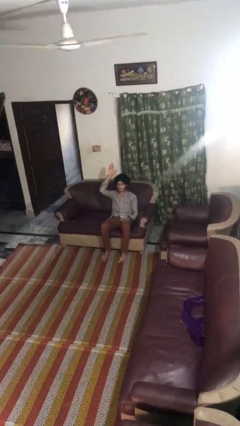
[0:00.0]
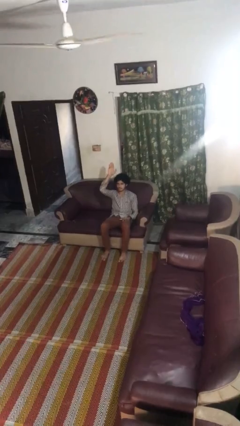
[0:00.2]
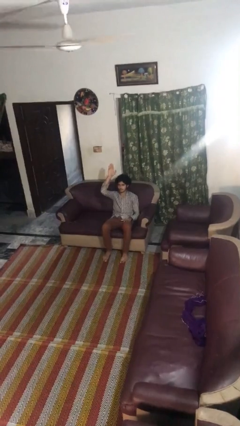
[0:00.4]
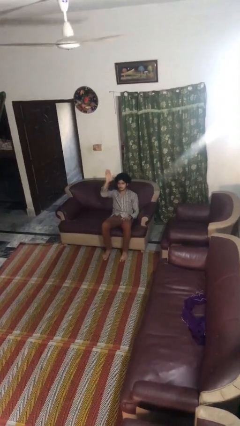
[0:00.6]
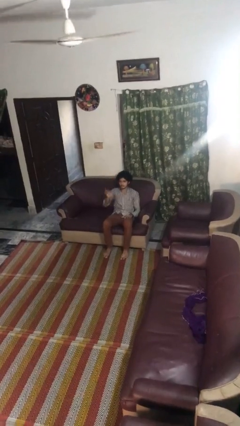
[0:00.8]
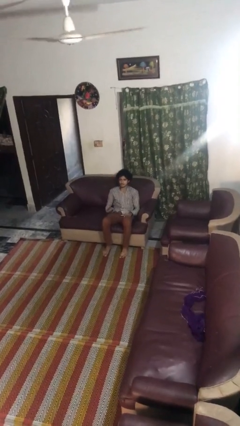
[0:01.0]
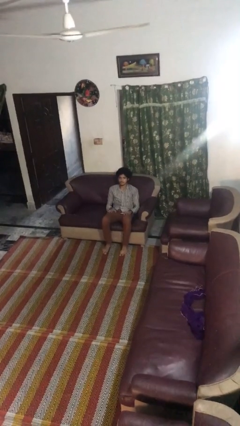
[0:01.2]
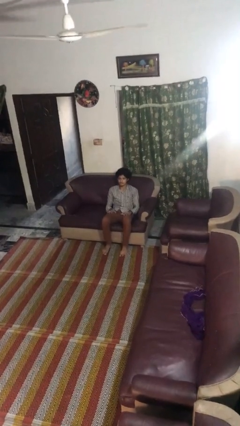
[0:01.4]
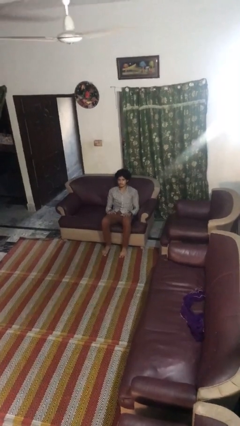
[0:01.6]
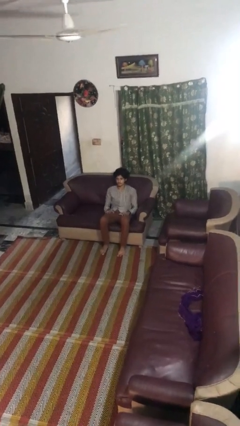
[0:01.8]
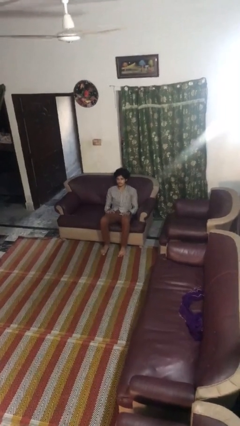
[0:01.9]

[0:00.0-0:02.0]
person gestures lower hand

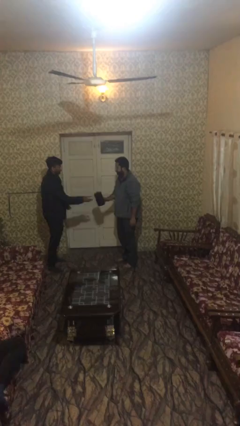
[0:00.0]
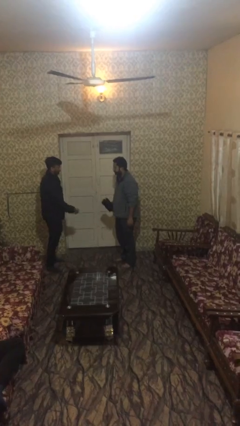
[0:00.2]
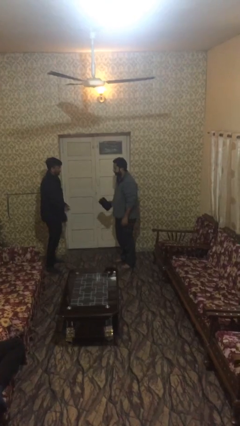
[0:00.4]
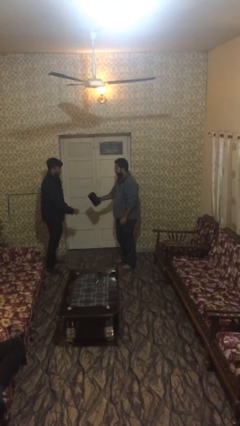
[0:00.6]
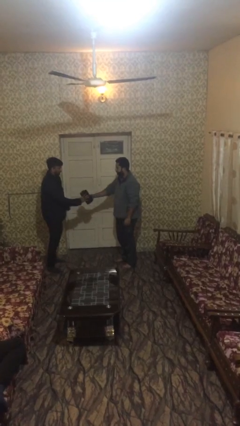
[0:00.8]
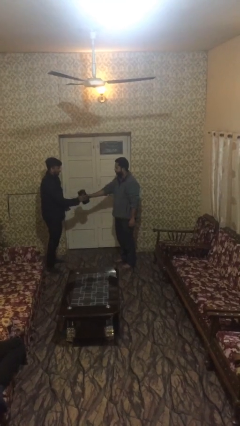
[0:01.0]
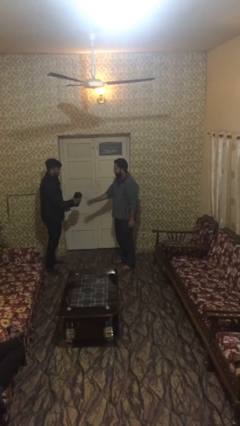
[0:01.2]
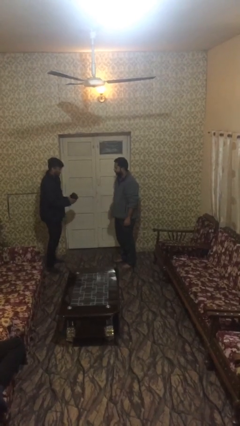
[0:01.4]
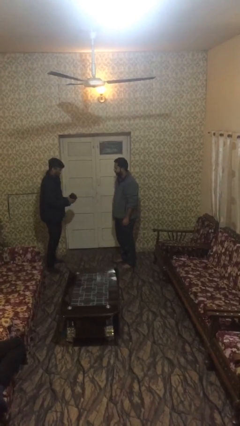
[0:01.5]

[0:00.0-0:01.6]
person transfers object to person

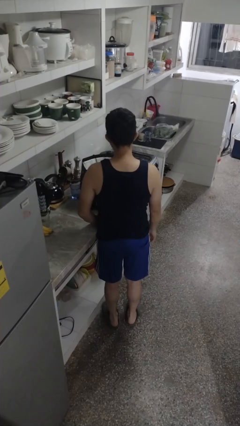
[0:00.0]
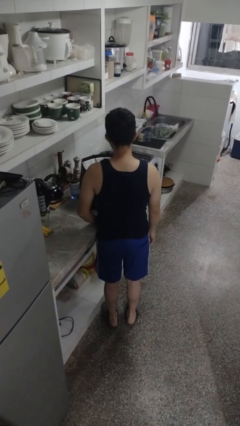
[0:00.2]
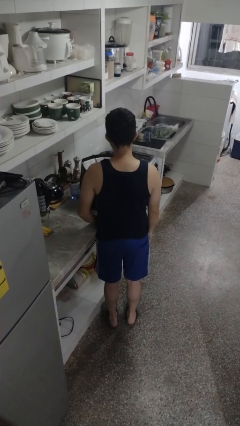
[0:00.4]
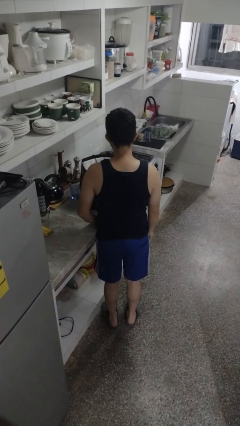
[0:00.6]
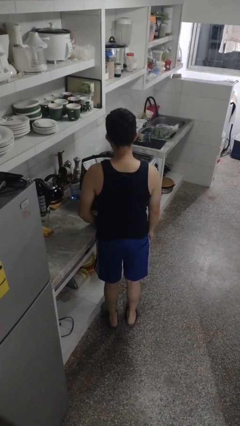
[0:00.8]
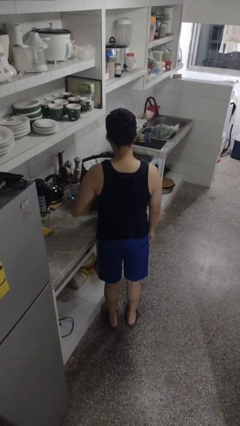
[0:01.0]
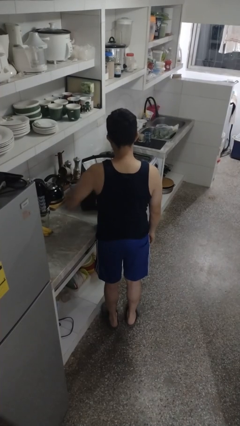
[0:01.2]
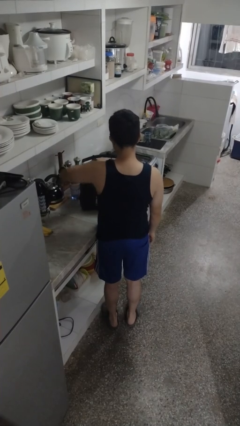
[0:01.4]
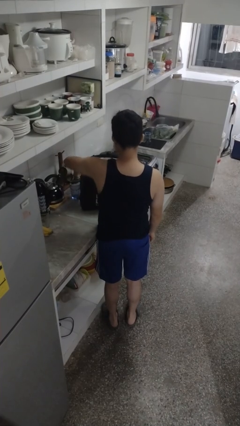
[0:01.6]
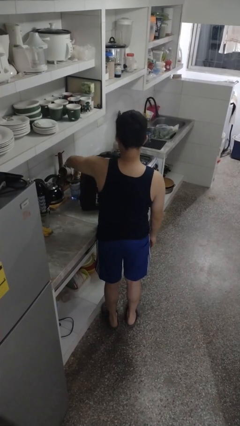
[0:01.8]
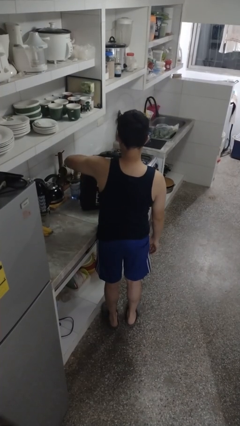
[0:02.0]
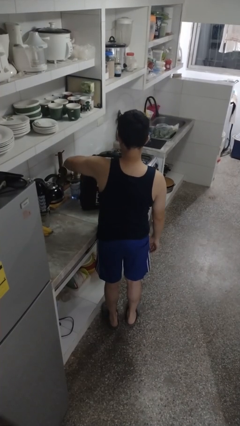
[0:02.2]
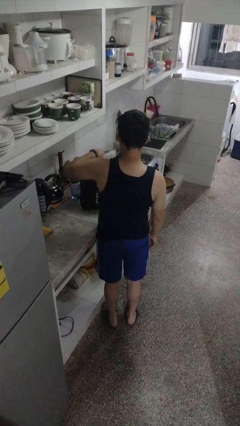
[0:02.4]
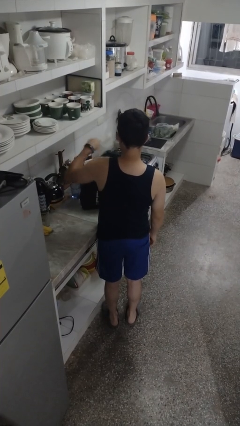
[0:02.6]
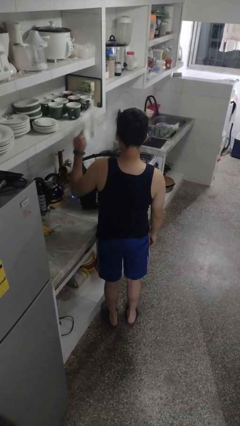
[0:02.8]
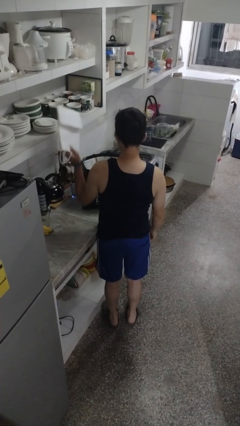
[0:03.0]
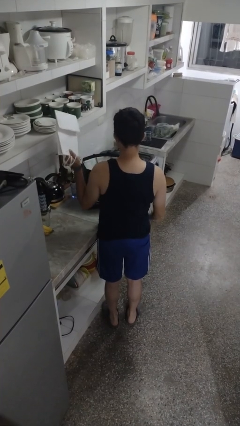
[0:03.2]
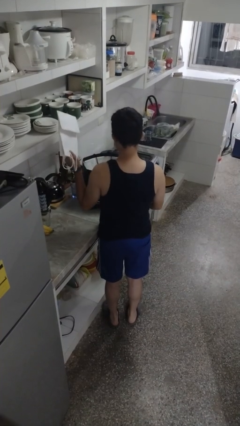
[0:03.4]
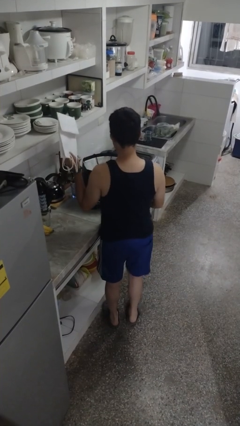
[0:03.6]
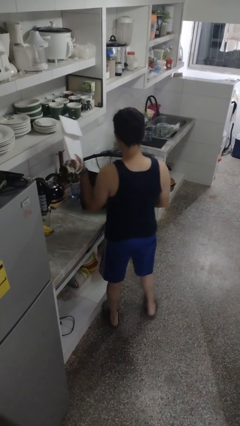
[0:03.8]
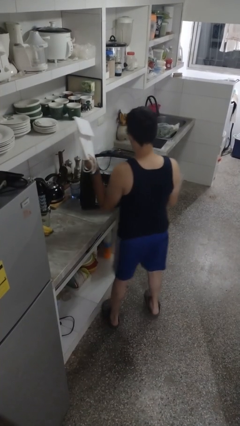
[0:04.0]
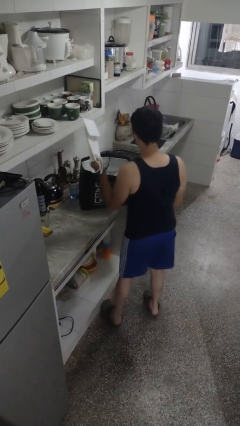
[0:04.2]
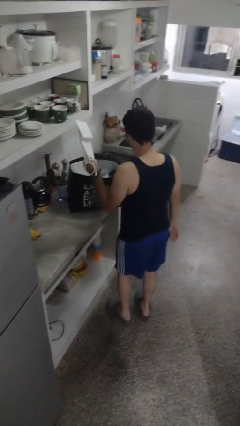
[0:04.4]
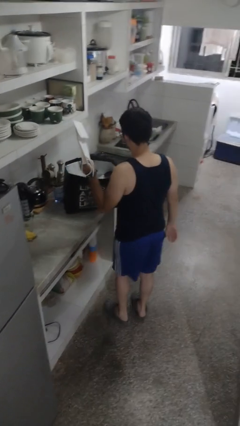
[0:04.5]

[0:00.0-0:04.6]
person takes object from bag

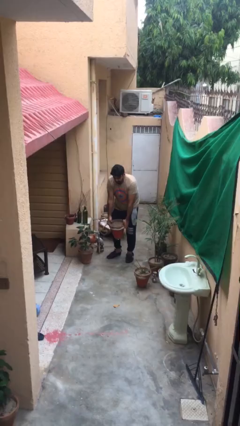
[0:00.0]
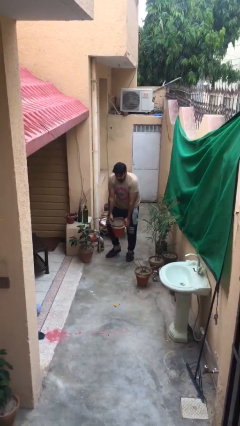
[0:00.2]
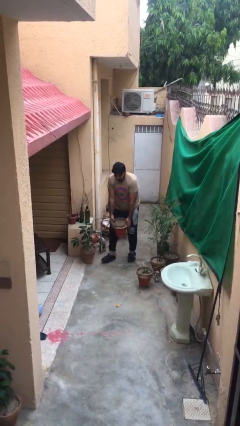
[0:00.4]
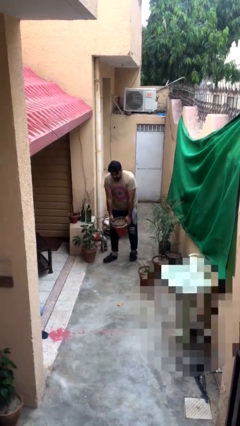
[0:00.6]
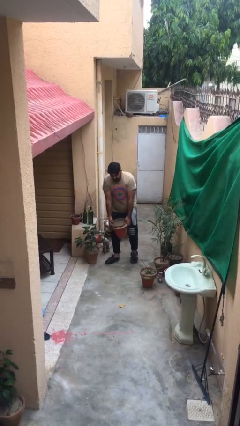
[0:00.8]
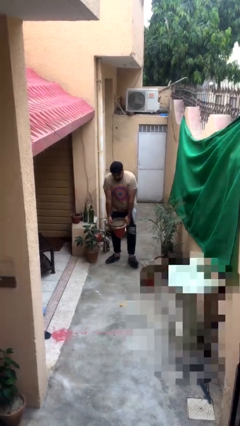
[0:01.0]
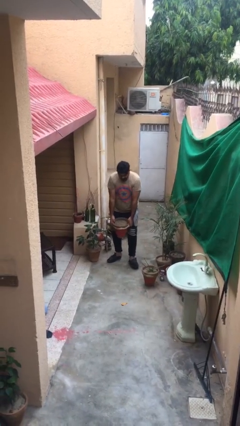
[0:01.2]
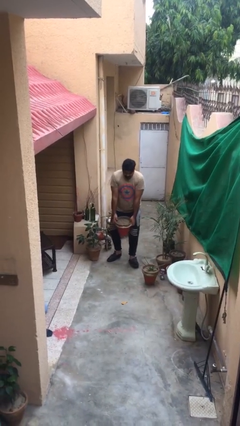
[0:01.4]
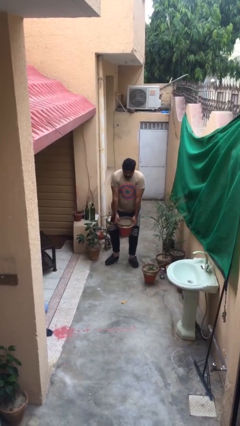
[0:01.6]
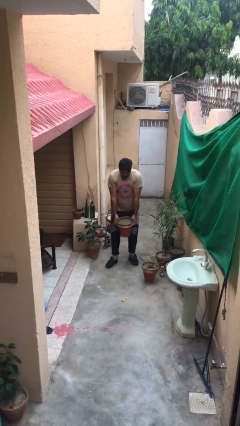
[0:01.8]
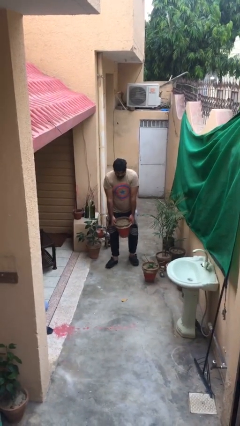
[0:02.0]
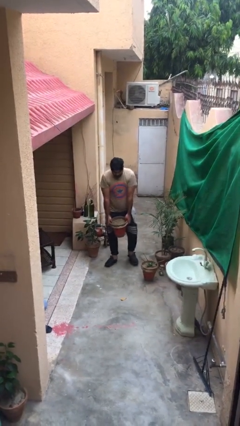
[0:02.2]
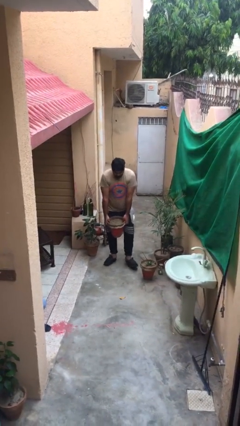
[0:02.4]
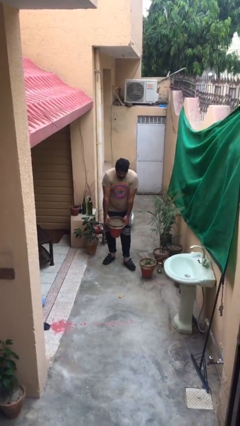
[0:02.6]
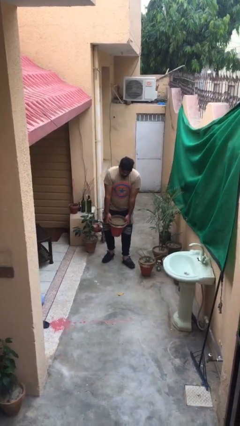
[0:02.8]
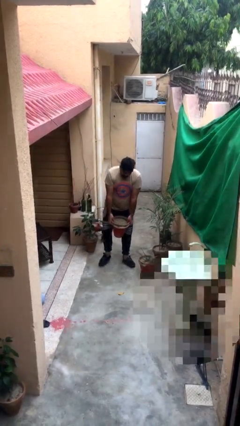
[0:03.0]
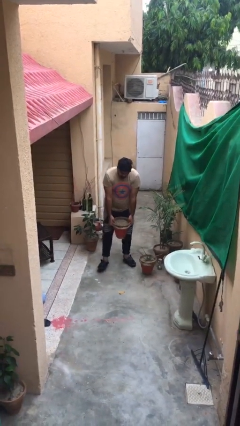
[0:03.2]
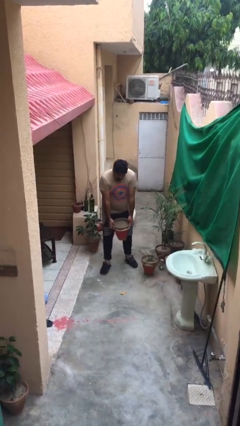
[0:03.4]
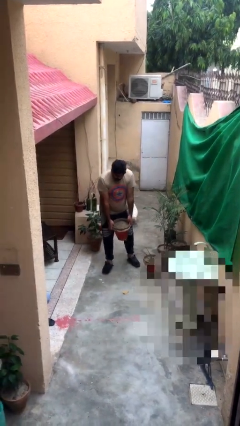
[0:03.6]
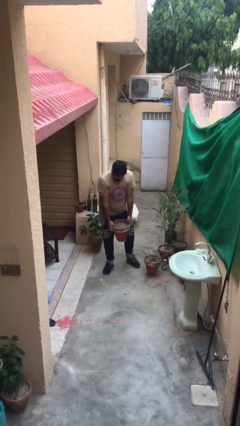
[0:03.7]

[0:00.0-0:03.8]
person carries heavy object

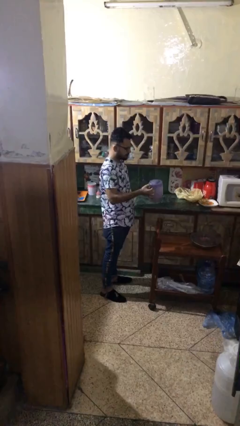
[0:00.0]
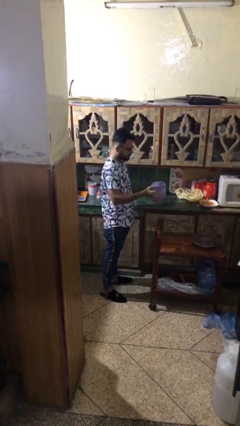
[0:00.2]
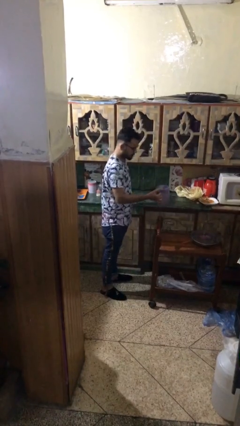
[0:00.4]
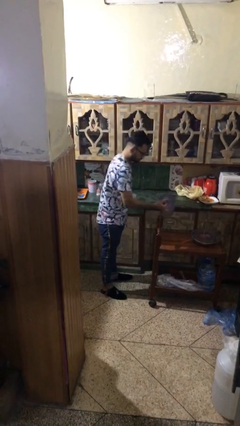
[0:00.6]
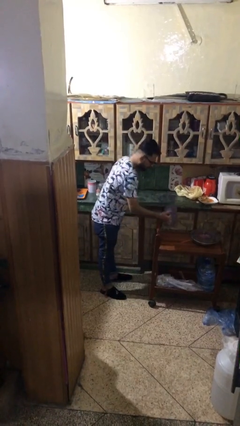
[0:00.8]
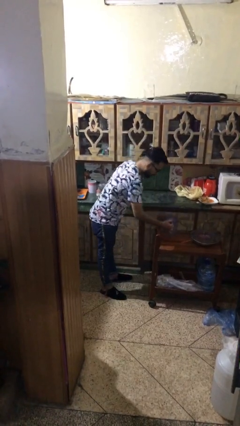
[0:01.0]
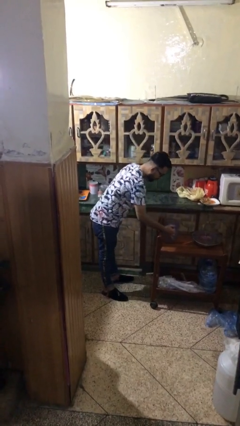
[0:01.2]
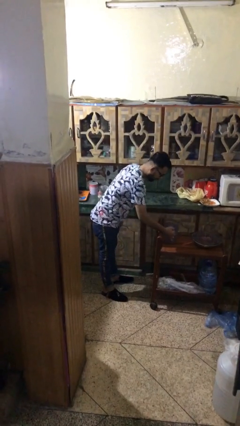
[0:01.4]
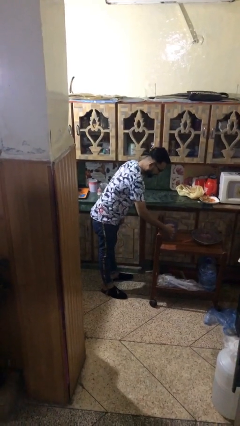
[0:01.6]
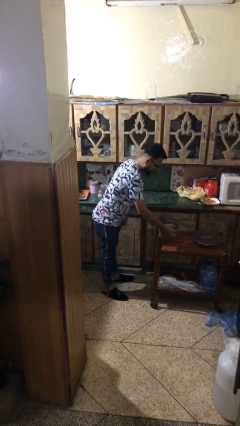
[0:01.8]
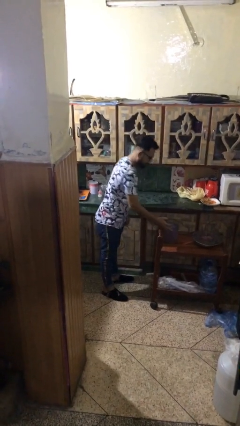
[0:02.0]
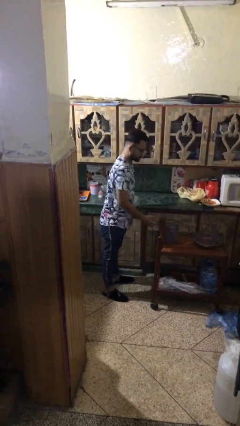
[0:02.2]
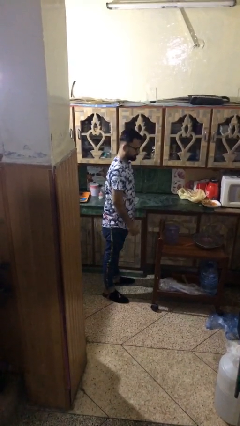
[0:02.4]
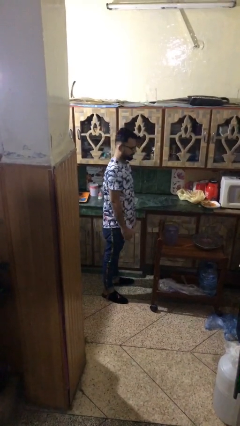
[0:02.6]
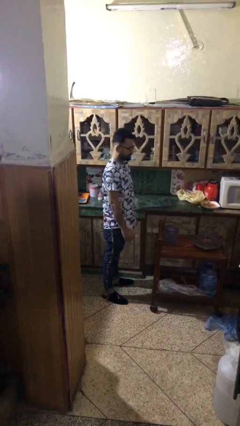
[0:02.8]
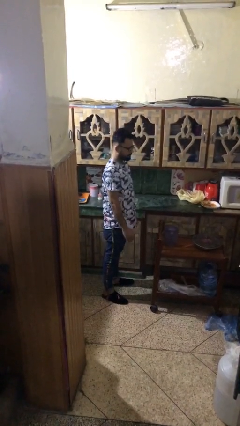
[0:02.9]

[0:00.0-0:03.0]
person puts down object on table

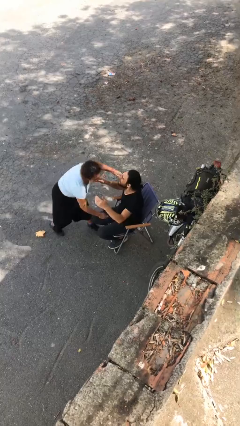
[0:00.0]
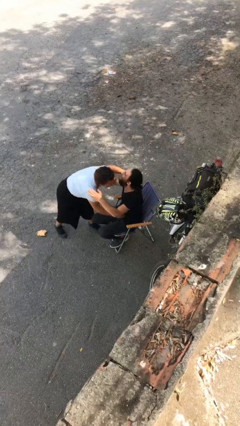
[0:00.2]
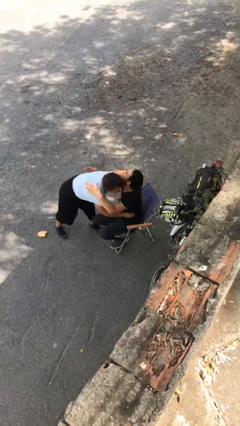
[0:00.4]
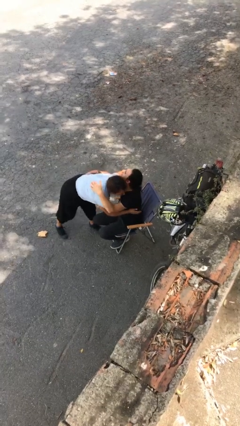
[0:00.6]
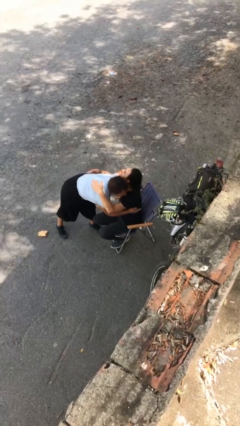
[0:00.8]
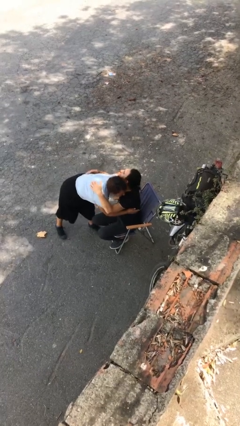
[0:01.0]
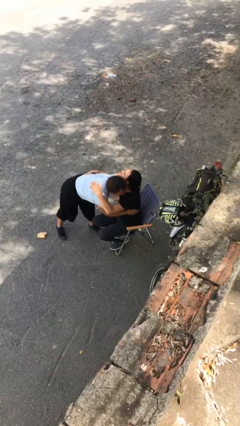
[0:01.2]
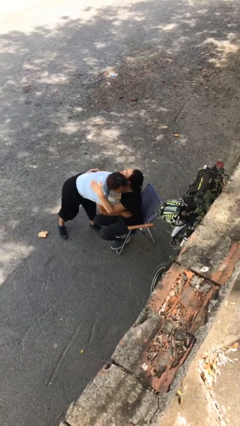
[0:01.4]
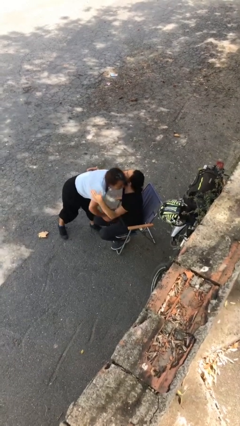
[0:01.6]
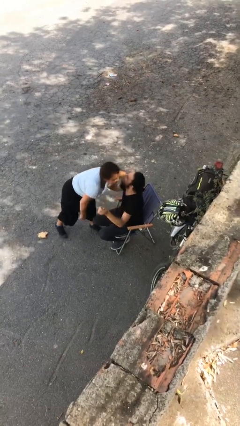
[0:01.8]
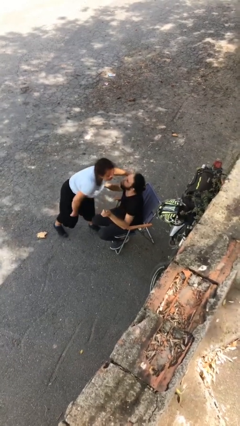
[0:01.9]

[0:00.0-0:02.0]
person embraces person

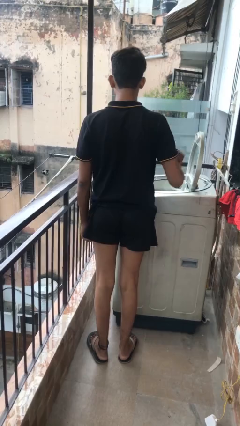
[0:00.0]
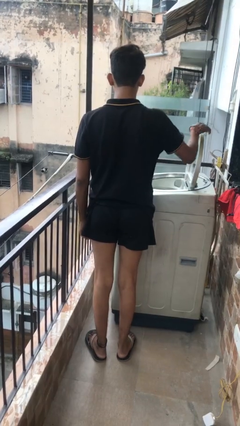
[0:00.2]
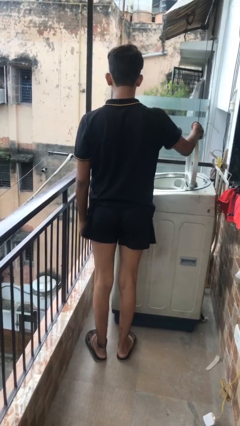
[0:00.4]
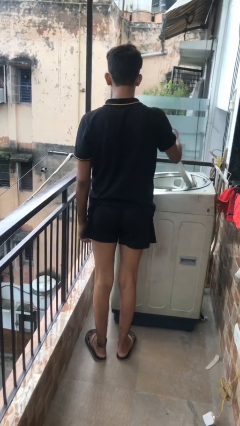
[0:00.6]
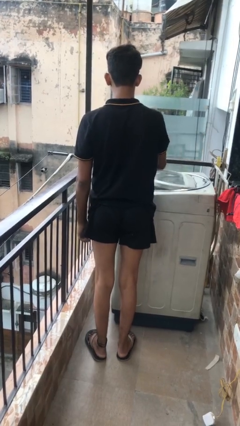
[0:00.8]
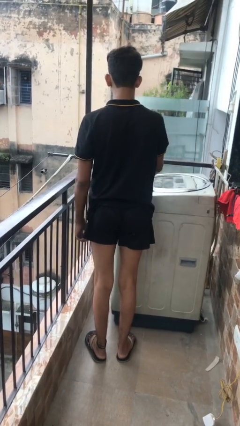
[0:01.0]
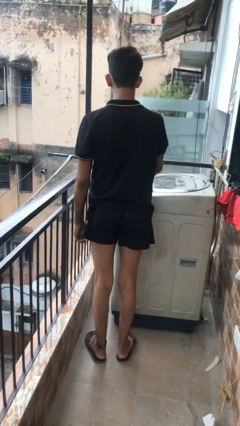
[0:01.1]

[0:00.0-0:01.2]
person closes clothes washer
